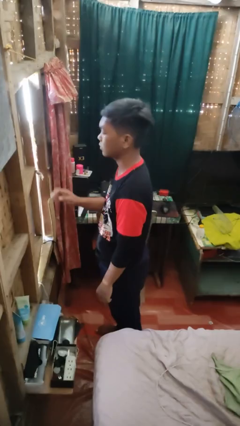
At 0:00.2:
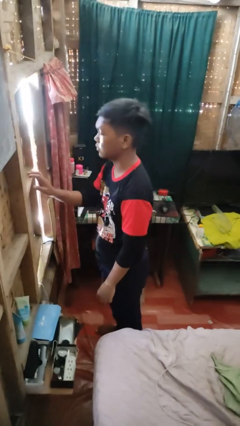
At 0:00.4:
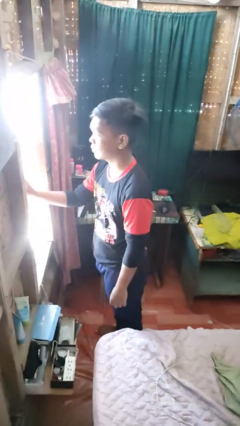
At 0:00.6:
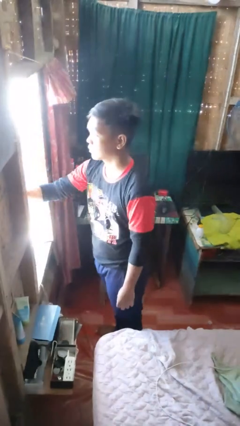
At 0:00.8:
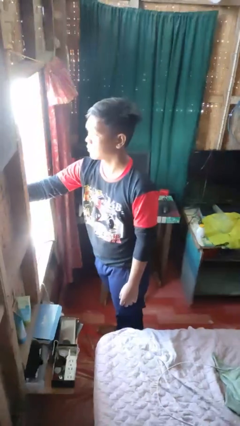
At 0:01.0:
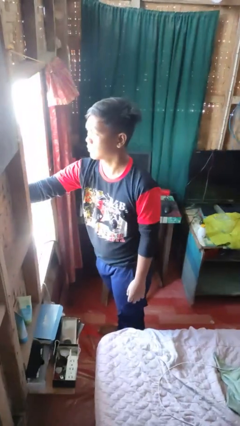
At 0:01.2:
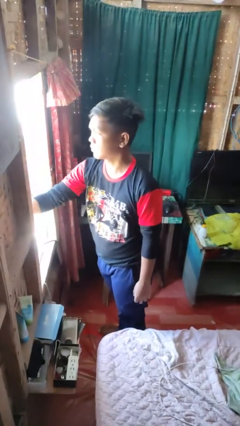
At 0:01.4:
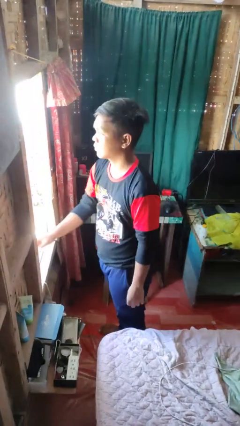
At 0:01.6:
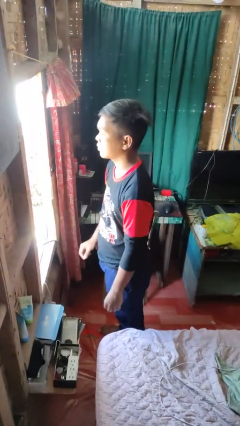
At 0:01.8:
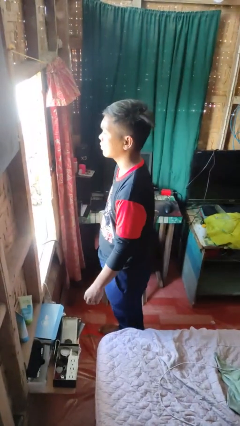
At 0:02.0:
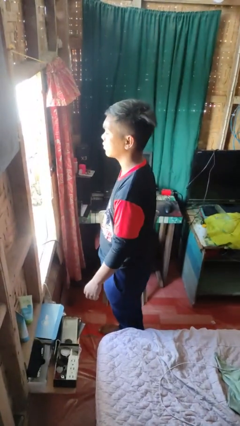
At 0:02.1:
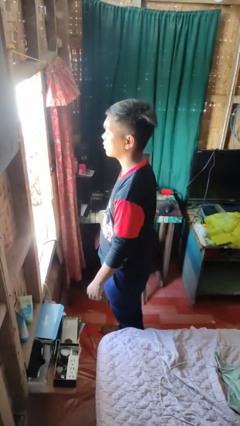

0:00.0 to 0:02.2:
person opens home window

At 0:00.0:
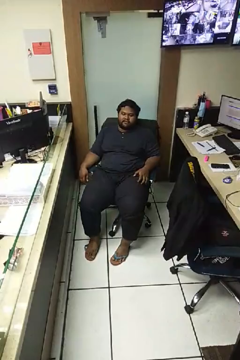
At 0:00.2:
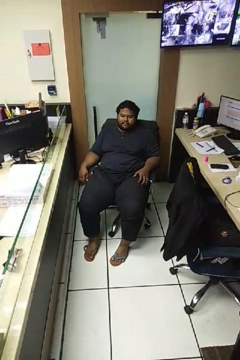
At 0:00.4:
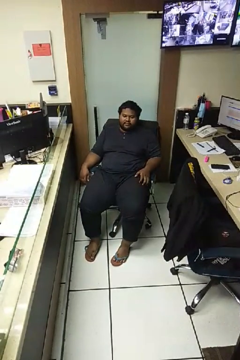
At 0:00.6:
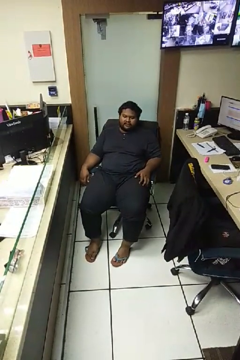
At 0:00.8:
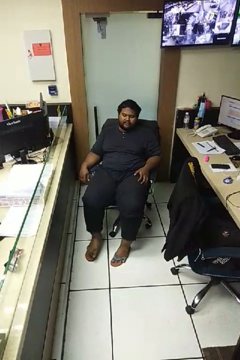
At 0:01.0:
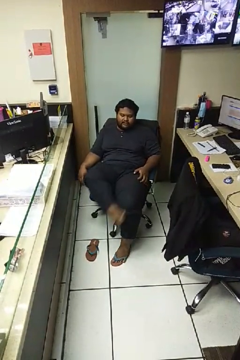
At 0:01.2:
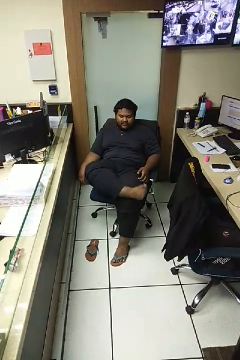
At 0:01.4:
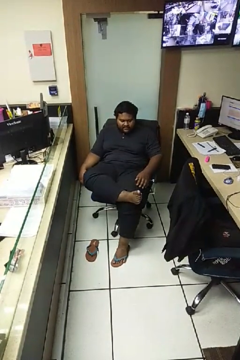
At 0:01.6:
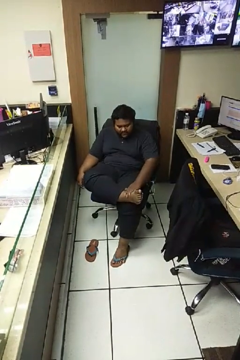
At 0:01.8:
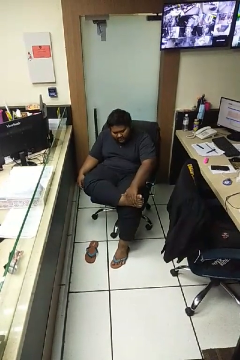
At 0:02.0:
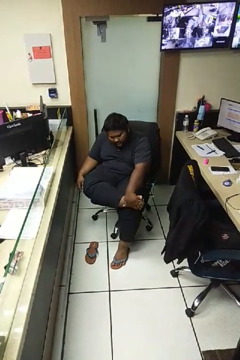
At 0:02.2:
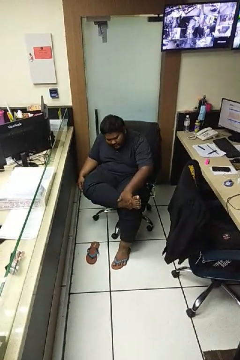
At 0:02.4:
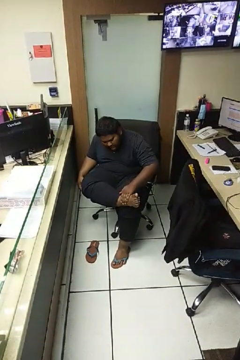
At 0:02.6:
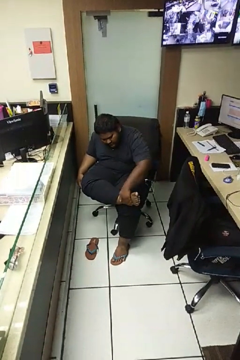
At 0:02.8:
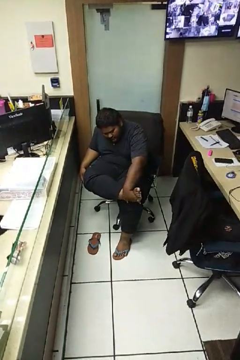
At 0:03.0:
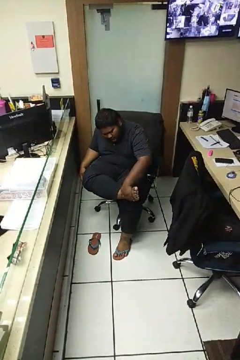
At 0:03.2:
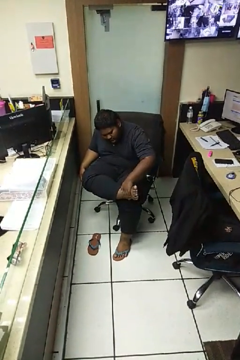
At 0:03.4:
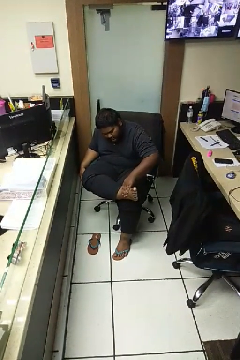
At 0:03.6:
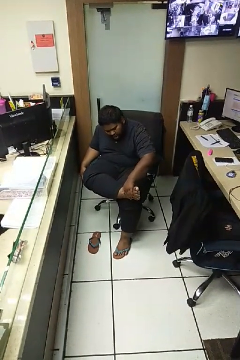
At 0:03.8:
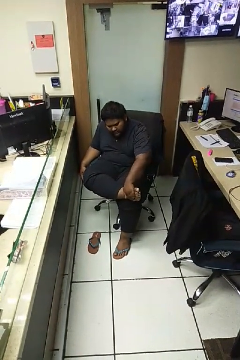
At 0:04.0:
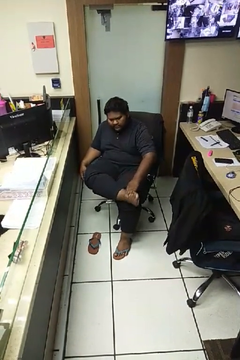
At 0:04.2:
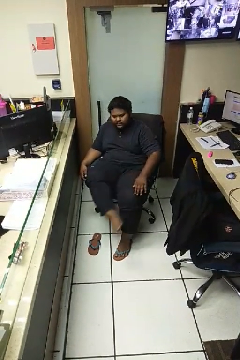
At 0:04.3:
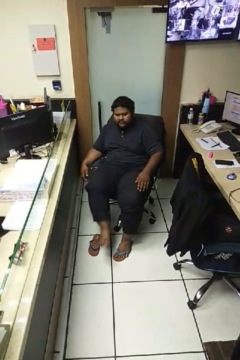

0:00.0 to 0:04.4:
person rubs foot

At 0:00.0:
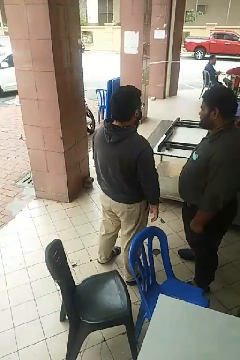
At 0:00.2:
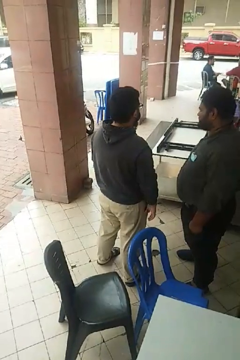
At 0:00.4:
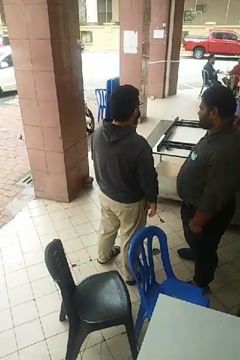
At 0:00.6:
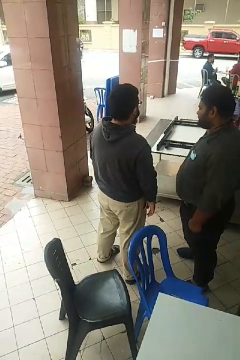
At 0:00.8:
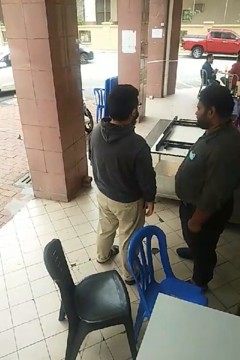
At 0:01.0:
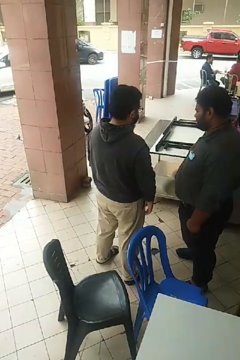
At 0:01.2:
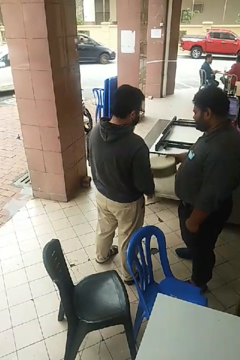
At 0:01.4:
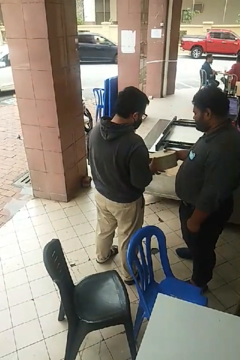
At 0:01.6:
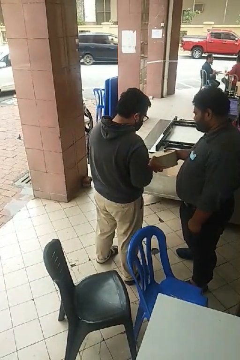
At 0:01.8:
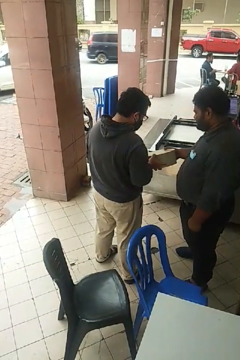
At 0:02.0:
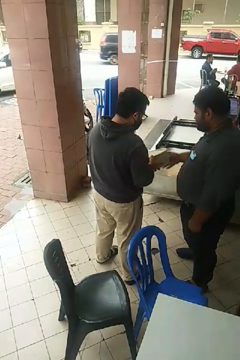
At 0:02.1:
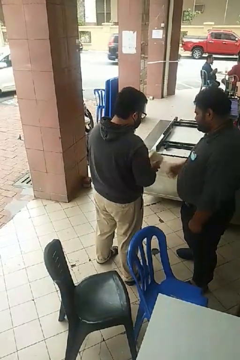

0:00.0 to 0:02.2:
person transfers object to person

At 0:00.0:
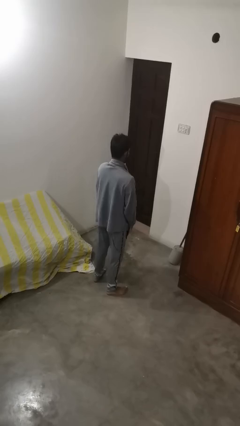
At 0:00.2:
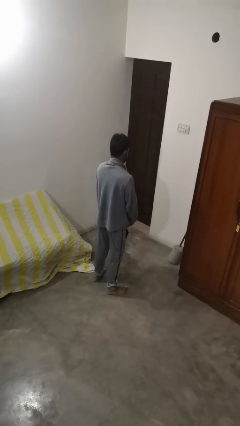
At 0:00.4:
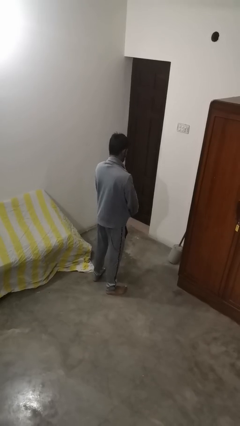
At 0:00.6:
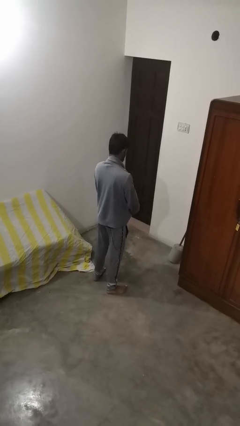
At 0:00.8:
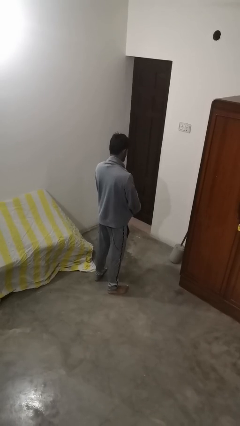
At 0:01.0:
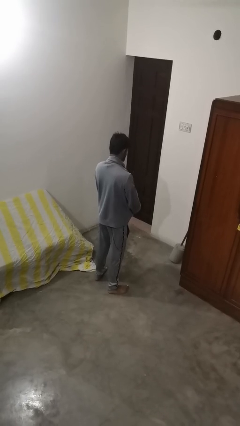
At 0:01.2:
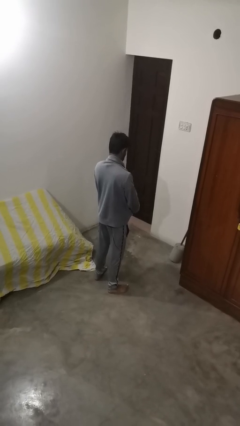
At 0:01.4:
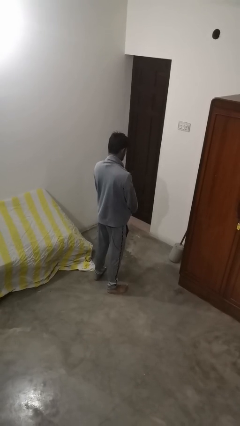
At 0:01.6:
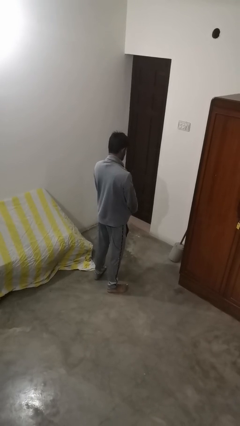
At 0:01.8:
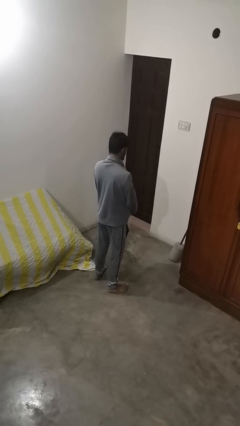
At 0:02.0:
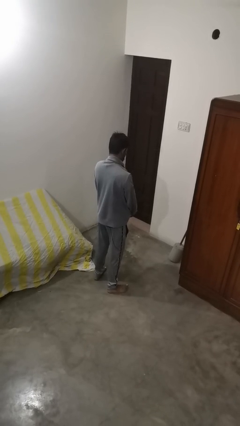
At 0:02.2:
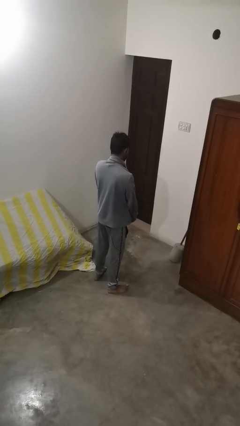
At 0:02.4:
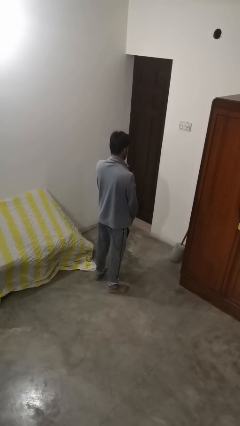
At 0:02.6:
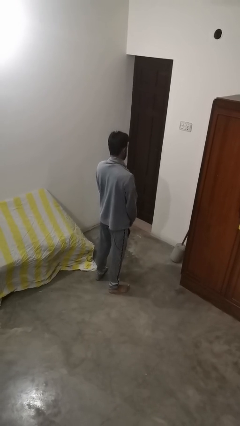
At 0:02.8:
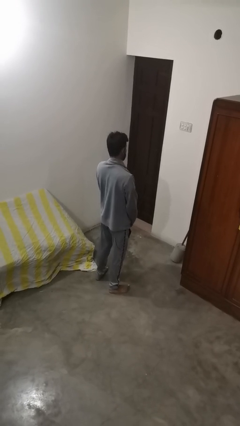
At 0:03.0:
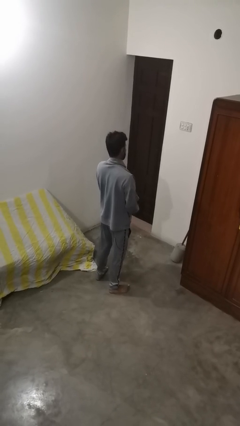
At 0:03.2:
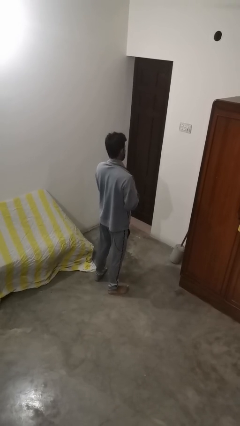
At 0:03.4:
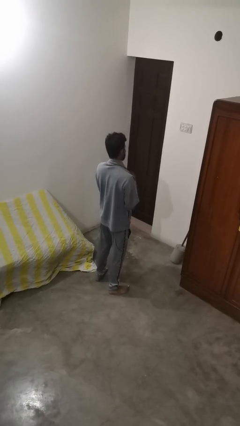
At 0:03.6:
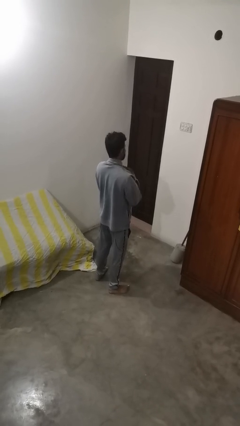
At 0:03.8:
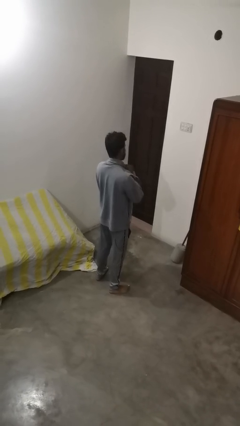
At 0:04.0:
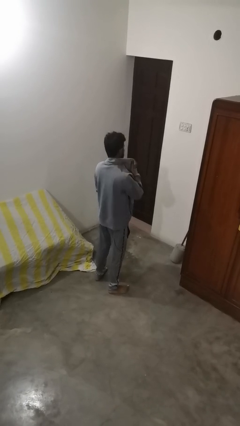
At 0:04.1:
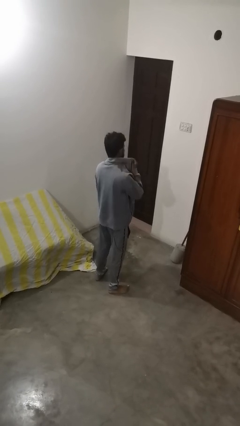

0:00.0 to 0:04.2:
person zips up jacket

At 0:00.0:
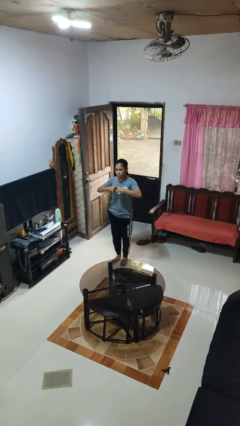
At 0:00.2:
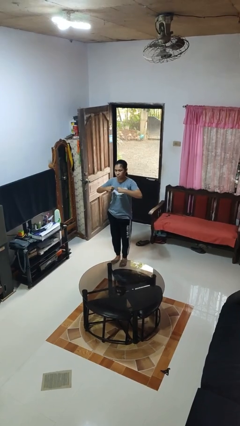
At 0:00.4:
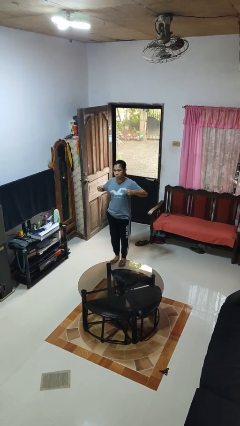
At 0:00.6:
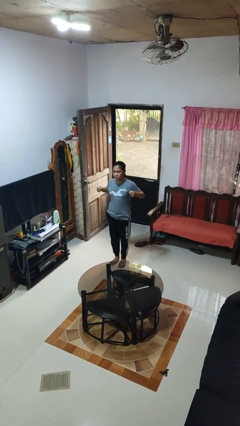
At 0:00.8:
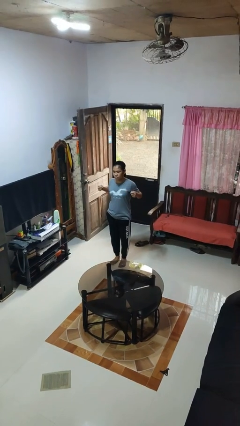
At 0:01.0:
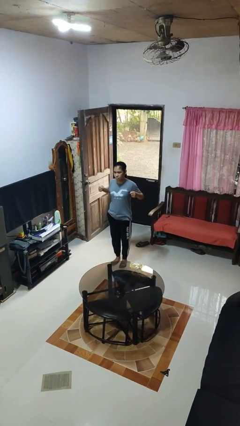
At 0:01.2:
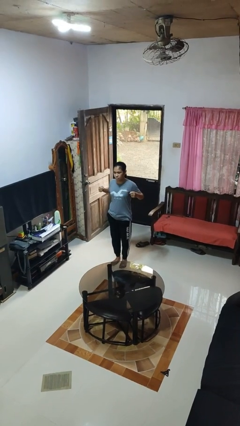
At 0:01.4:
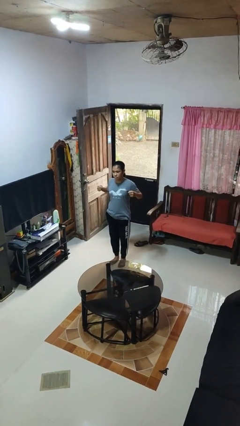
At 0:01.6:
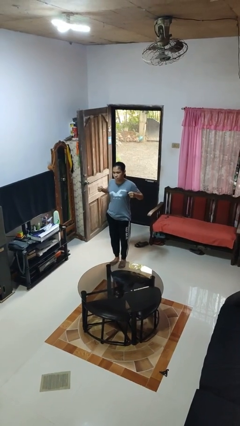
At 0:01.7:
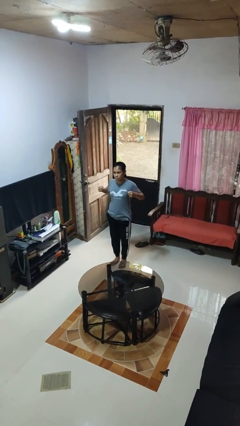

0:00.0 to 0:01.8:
person gestures zoom in

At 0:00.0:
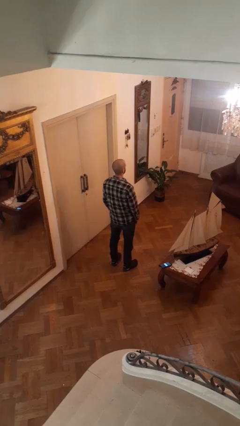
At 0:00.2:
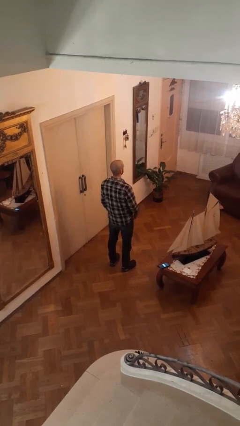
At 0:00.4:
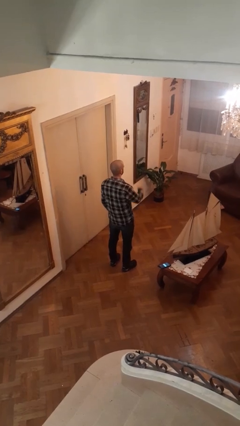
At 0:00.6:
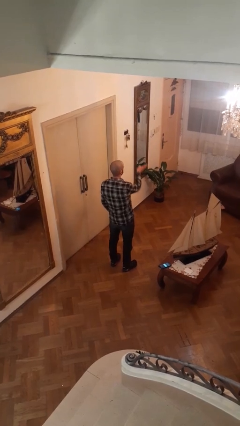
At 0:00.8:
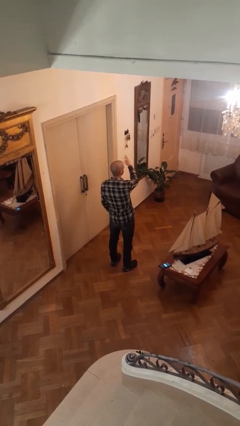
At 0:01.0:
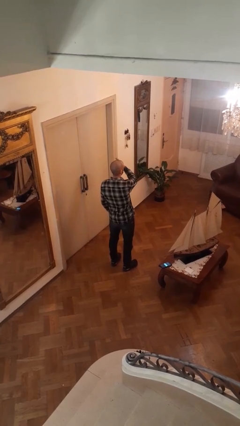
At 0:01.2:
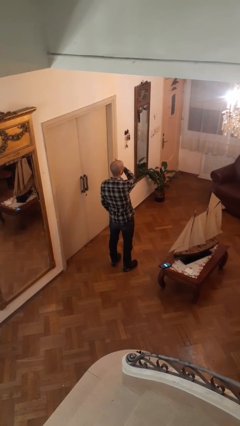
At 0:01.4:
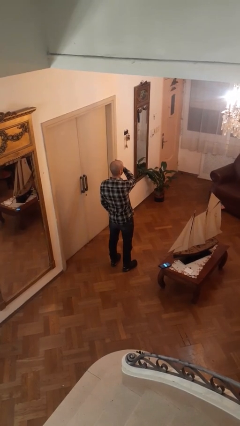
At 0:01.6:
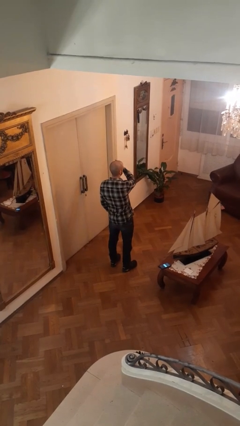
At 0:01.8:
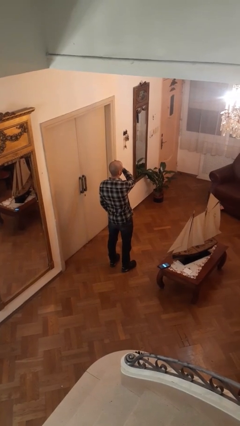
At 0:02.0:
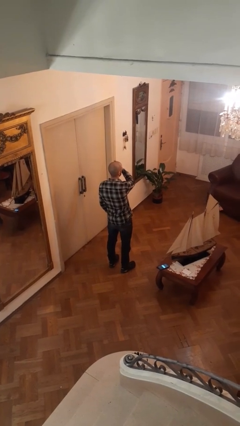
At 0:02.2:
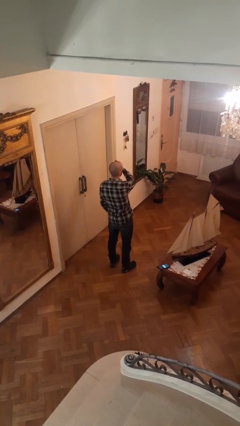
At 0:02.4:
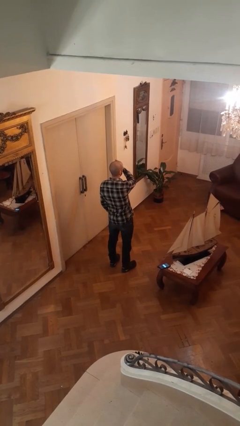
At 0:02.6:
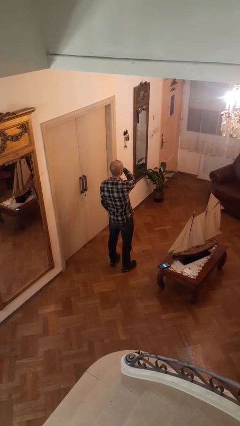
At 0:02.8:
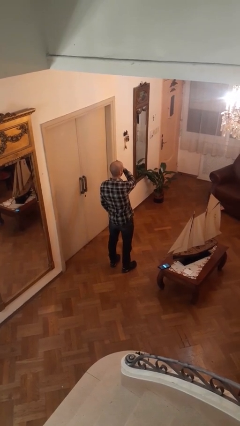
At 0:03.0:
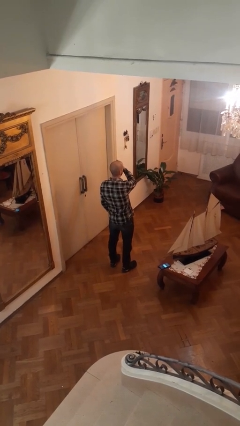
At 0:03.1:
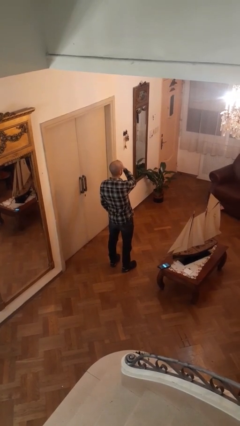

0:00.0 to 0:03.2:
person gestures swipe left
